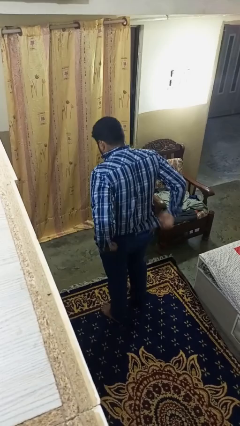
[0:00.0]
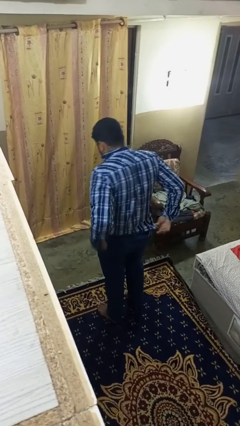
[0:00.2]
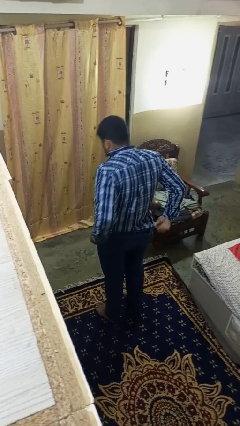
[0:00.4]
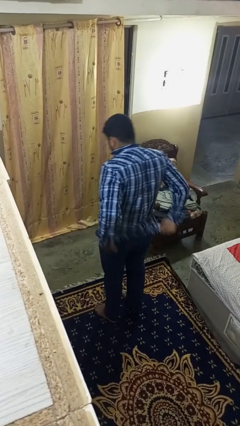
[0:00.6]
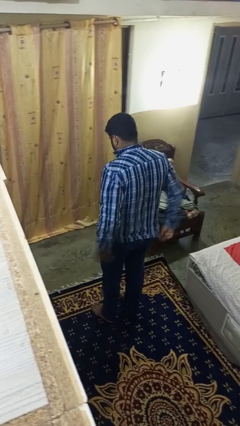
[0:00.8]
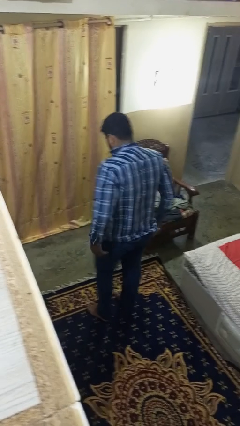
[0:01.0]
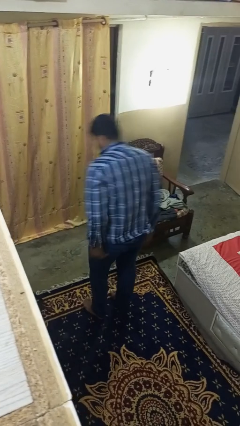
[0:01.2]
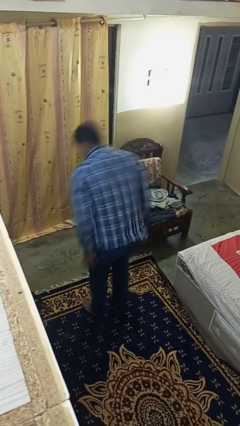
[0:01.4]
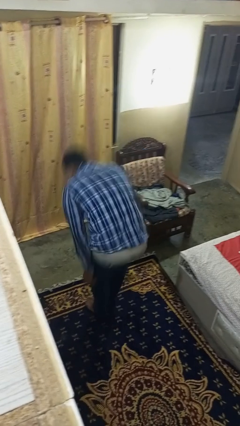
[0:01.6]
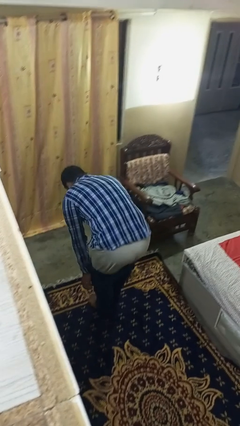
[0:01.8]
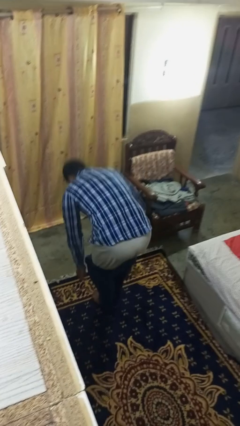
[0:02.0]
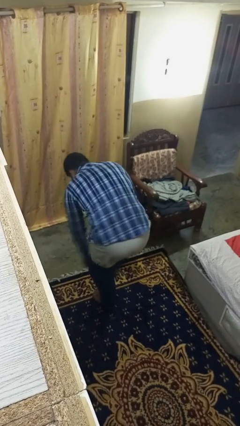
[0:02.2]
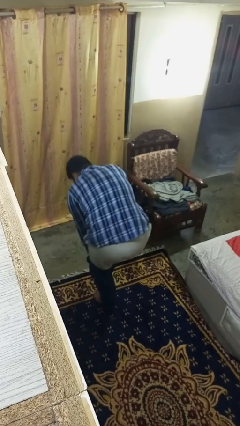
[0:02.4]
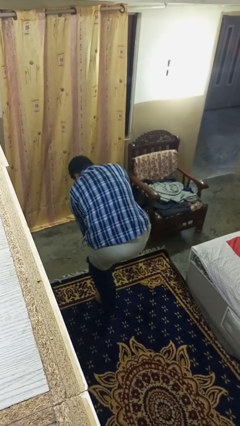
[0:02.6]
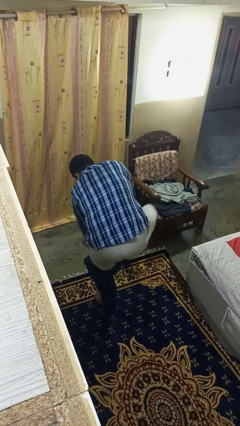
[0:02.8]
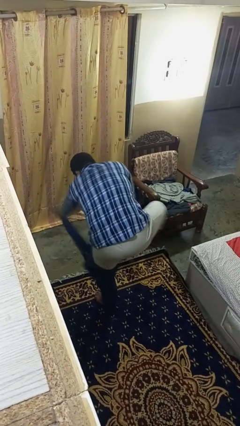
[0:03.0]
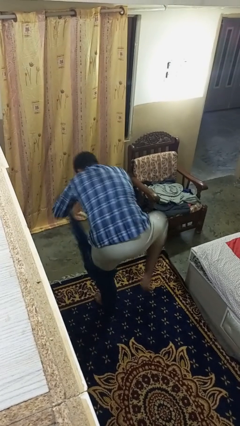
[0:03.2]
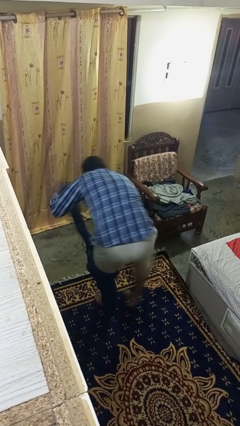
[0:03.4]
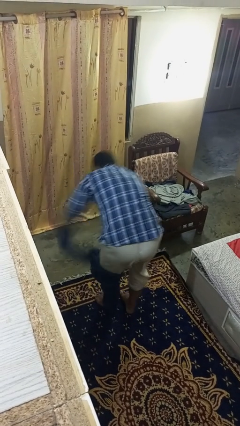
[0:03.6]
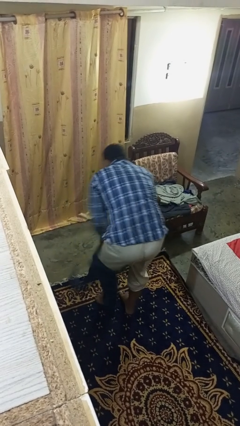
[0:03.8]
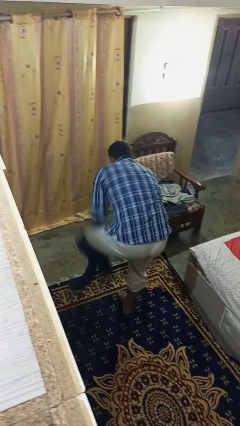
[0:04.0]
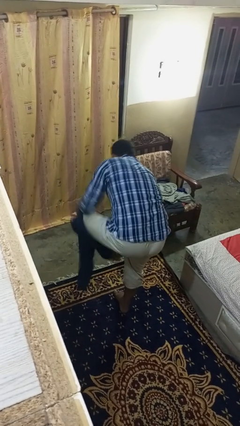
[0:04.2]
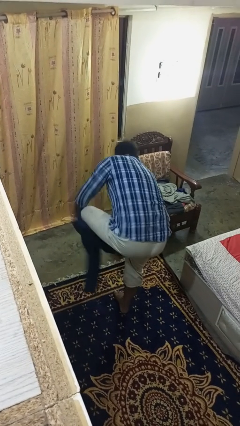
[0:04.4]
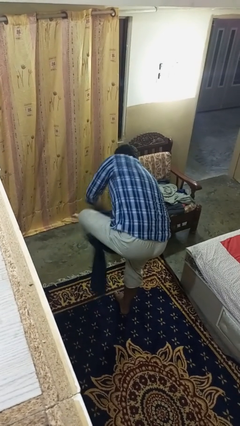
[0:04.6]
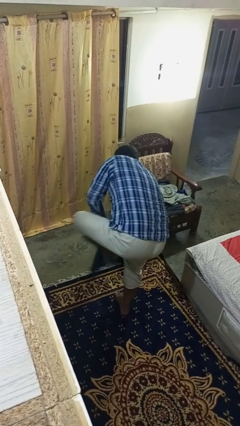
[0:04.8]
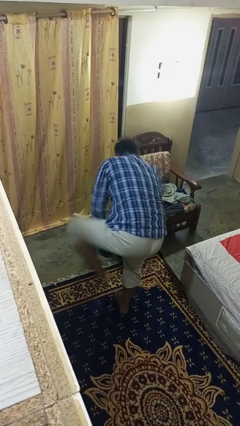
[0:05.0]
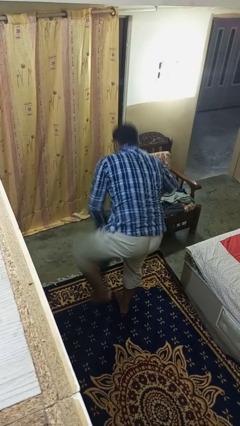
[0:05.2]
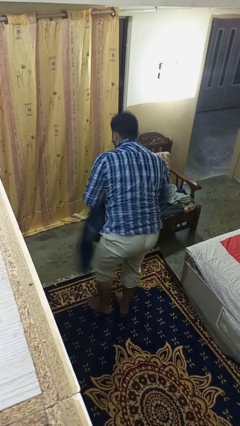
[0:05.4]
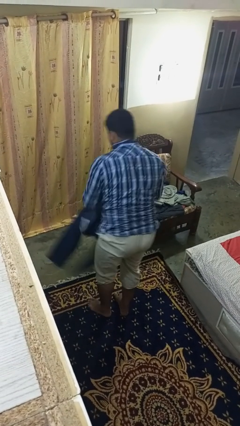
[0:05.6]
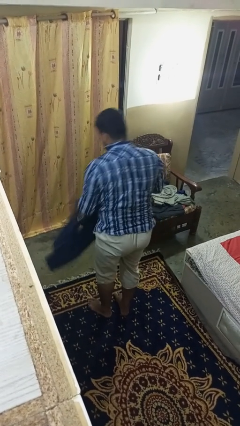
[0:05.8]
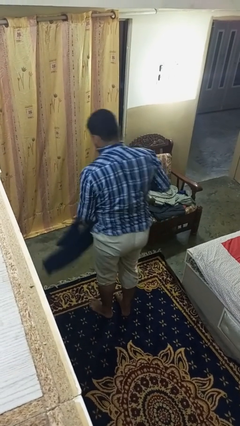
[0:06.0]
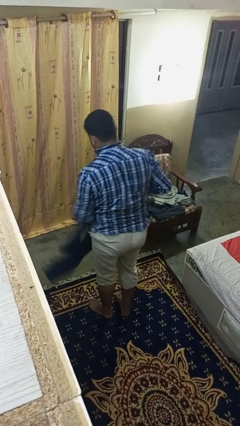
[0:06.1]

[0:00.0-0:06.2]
person takes off pants

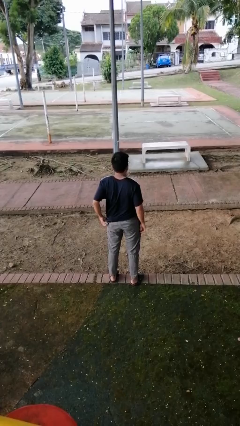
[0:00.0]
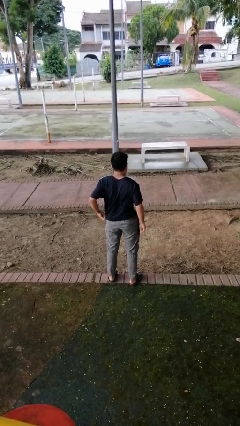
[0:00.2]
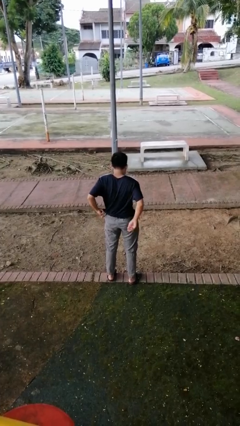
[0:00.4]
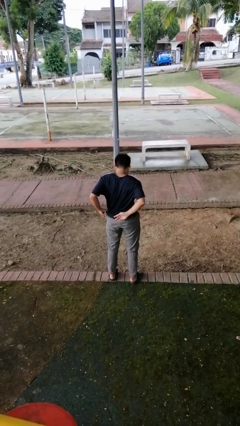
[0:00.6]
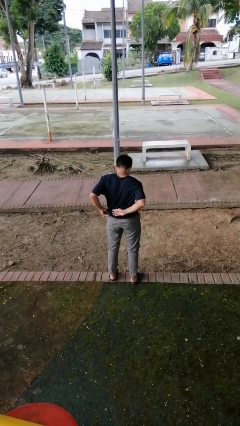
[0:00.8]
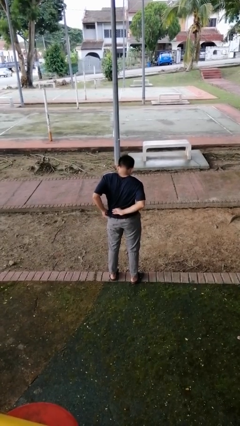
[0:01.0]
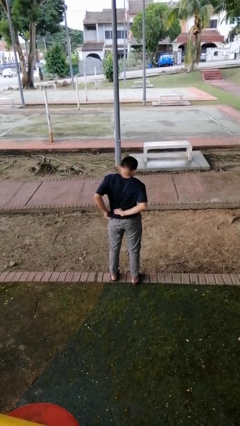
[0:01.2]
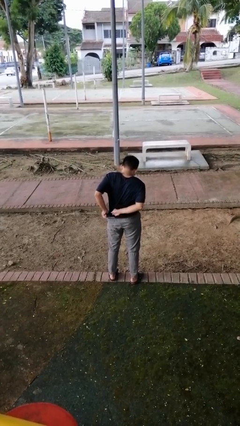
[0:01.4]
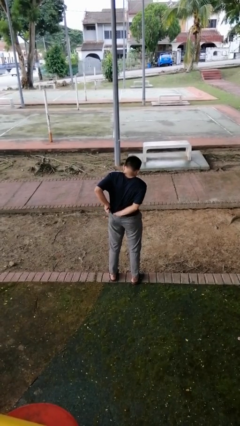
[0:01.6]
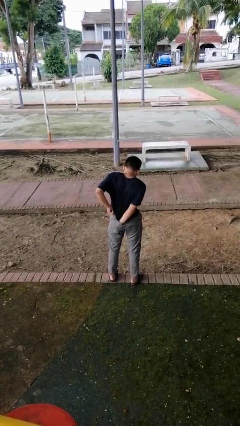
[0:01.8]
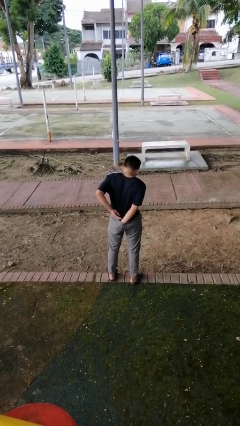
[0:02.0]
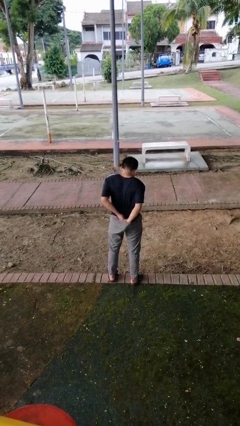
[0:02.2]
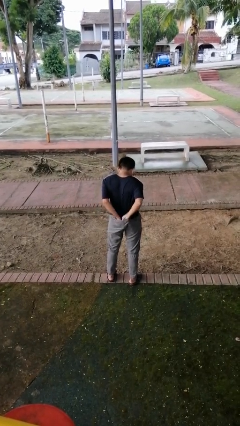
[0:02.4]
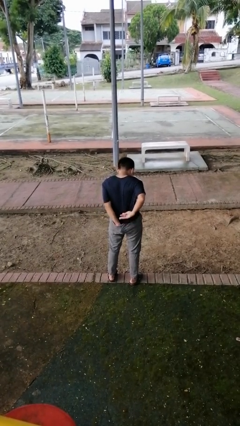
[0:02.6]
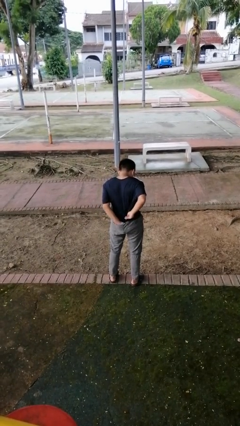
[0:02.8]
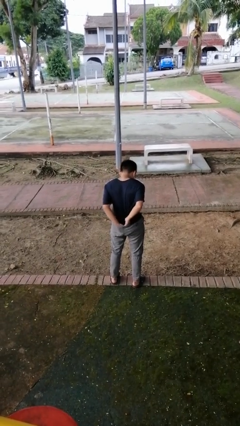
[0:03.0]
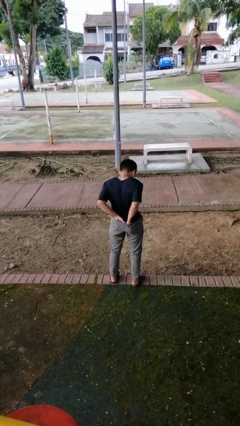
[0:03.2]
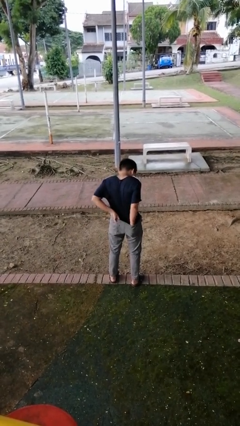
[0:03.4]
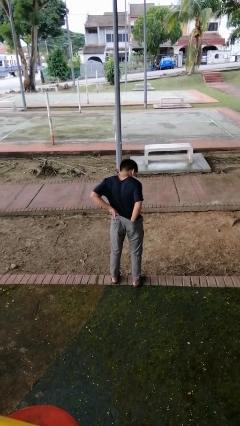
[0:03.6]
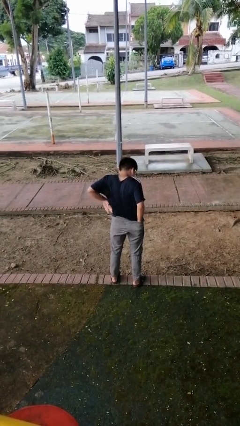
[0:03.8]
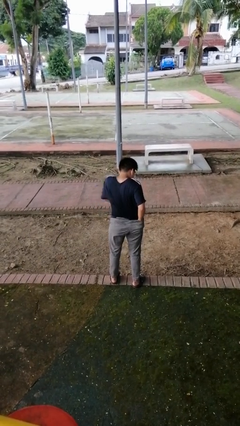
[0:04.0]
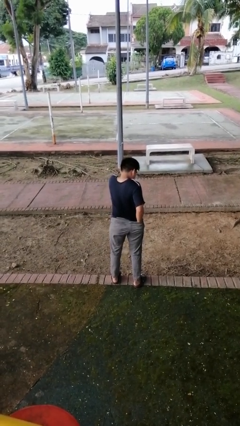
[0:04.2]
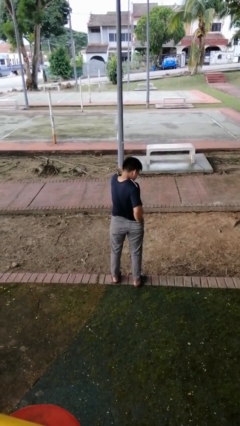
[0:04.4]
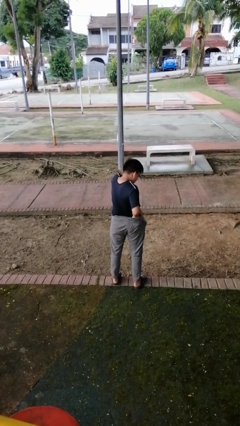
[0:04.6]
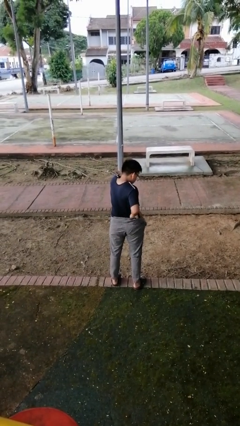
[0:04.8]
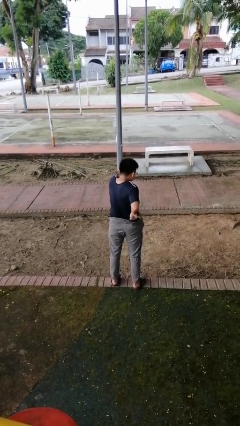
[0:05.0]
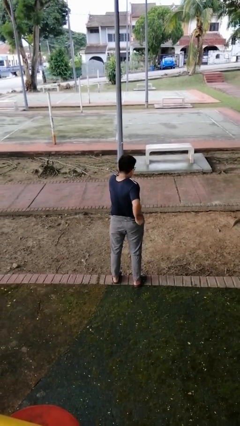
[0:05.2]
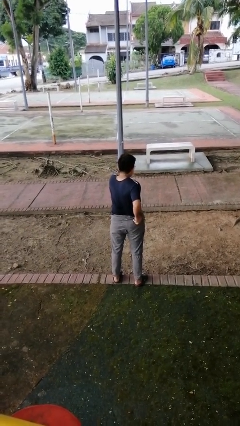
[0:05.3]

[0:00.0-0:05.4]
person tucks in shirt

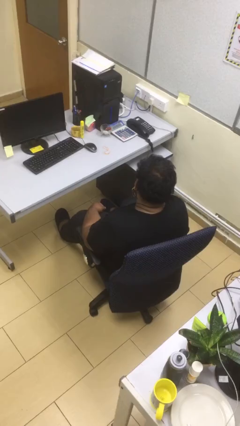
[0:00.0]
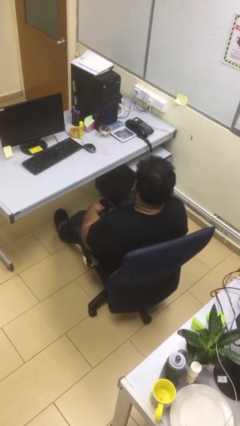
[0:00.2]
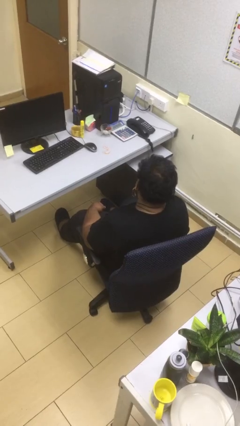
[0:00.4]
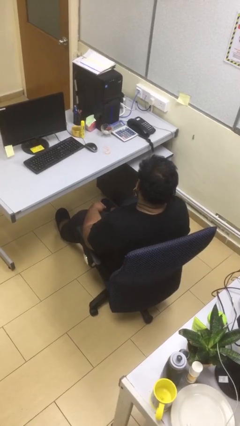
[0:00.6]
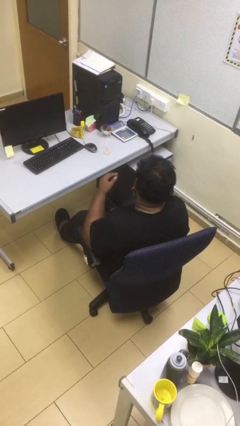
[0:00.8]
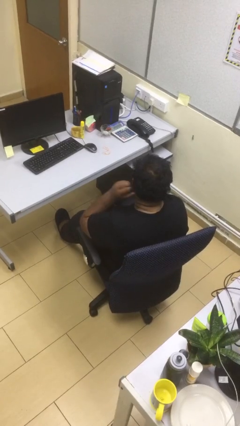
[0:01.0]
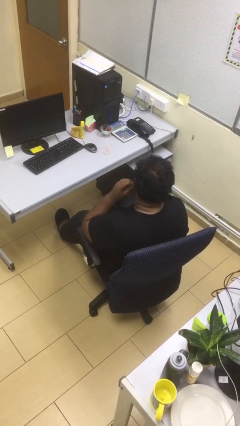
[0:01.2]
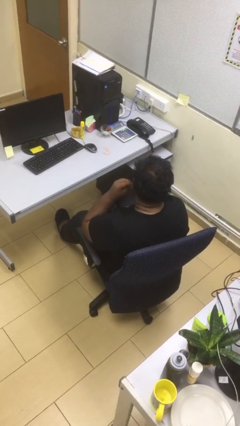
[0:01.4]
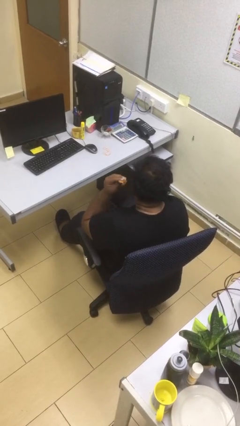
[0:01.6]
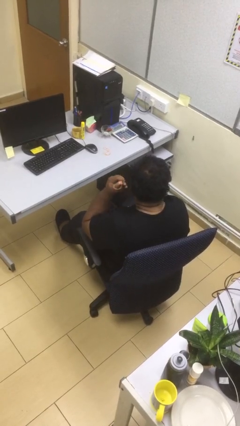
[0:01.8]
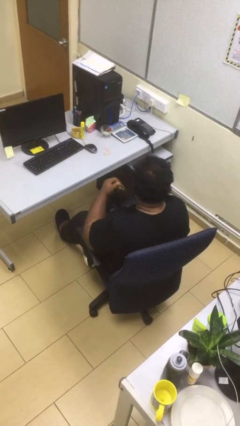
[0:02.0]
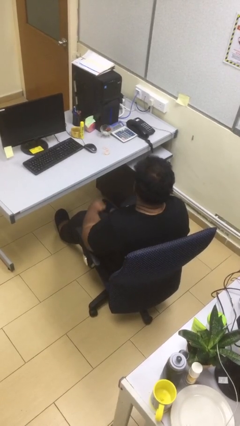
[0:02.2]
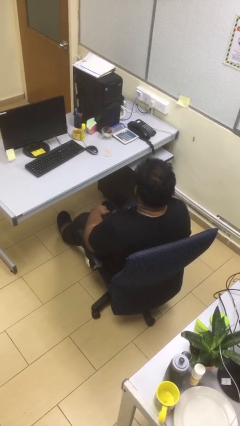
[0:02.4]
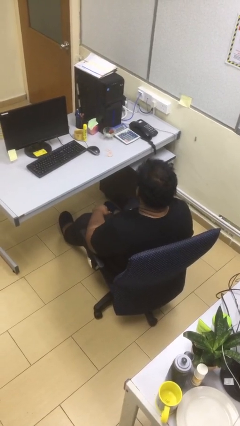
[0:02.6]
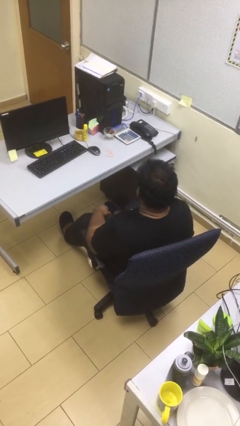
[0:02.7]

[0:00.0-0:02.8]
person takes off earrings

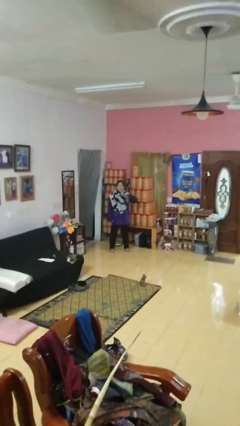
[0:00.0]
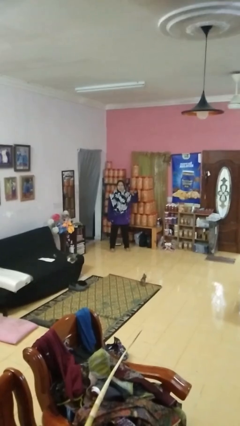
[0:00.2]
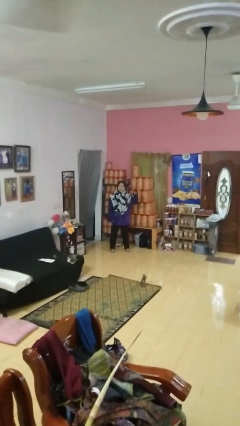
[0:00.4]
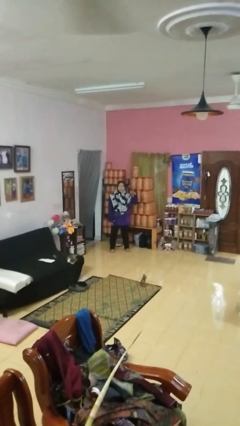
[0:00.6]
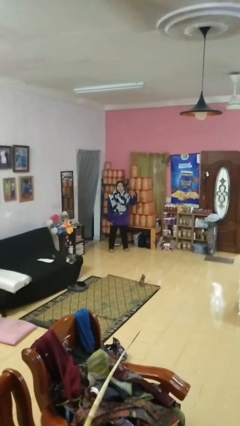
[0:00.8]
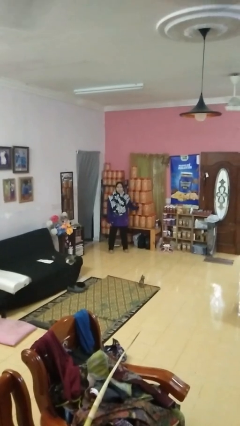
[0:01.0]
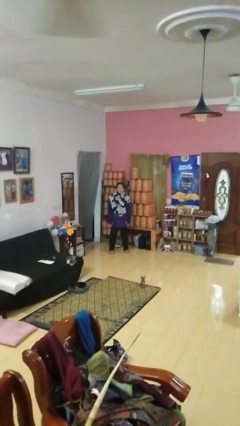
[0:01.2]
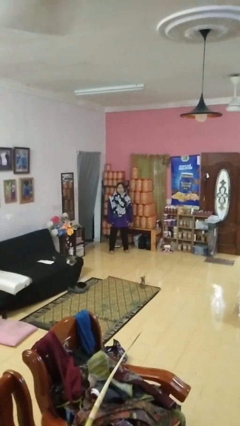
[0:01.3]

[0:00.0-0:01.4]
person gestures cut

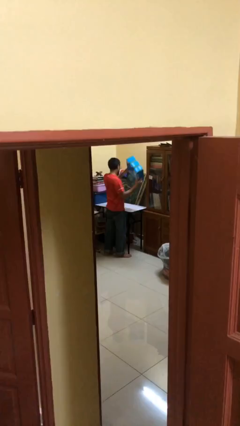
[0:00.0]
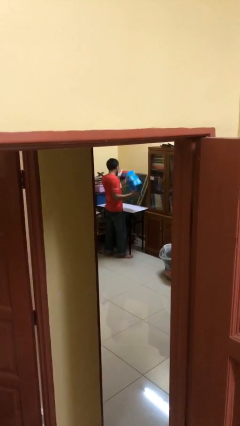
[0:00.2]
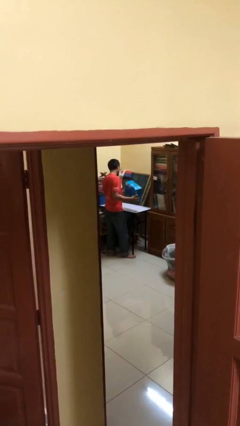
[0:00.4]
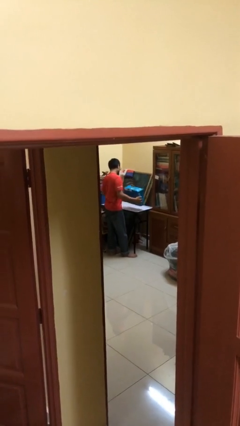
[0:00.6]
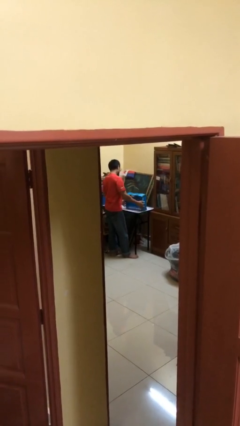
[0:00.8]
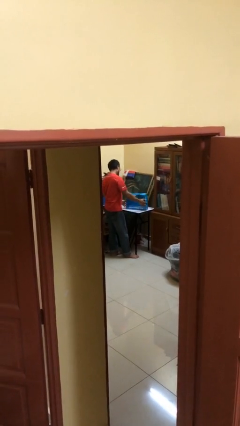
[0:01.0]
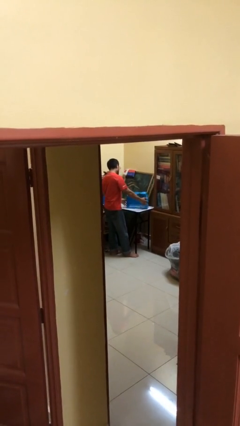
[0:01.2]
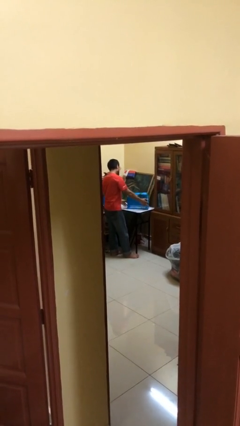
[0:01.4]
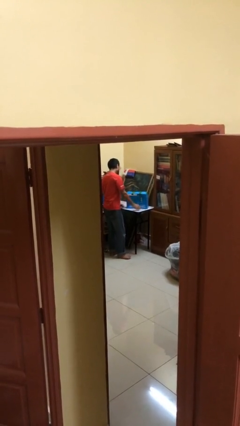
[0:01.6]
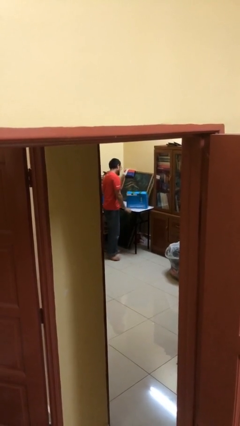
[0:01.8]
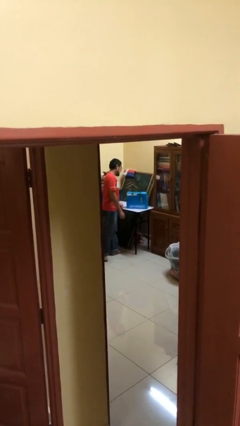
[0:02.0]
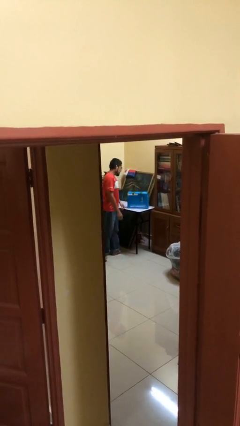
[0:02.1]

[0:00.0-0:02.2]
person puts down object on table
